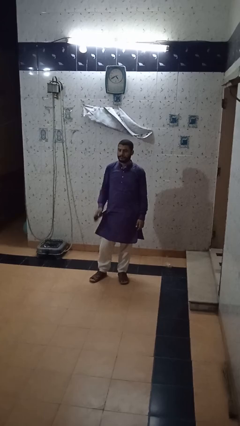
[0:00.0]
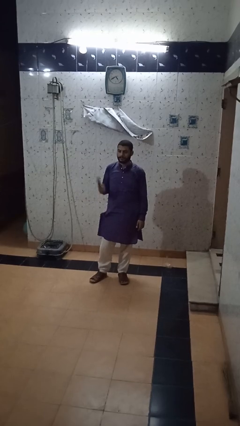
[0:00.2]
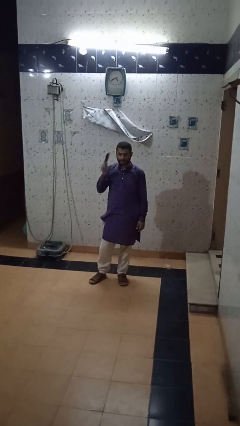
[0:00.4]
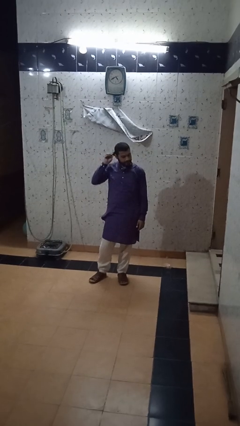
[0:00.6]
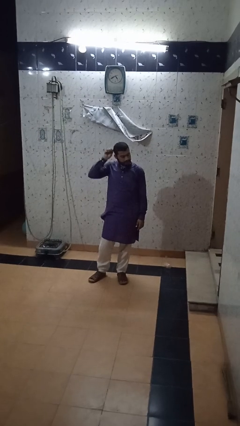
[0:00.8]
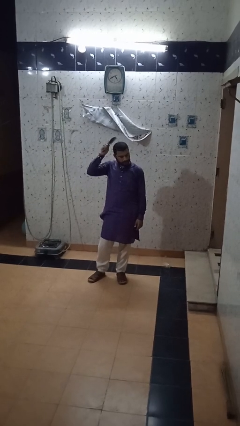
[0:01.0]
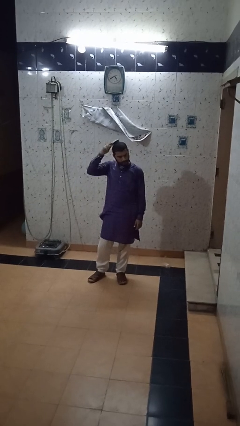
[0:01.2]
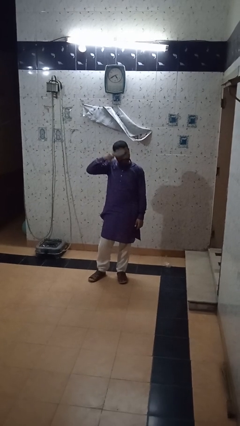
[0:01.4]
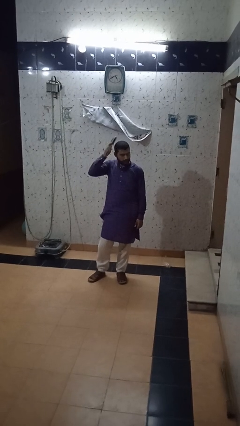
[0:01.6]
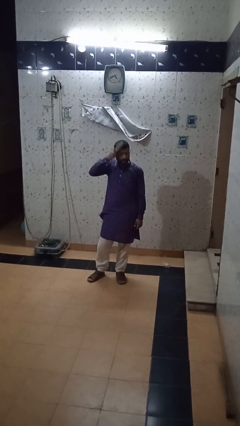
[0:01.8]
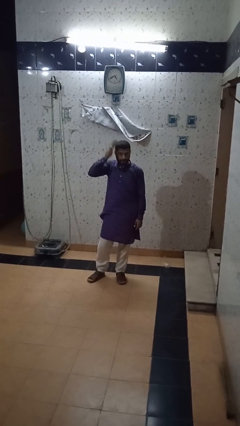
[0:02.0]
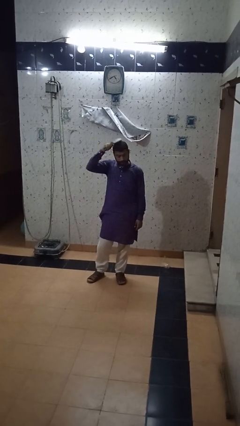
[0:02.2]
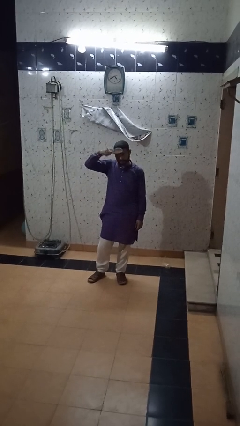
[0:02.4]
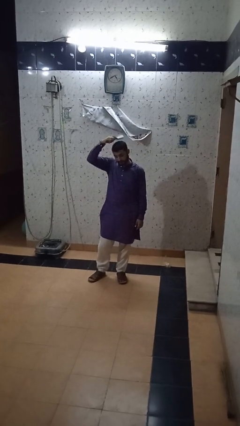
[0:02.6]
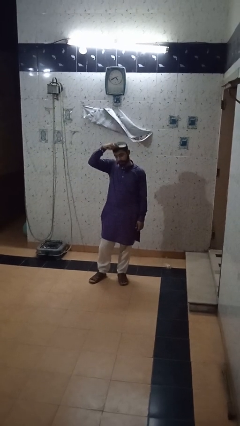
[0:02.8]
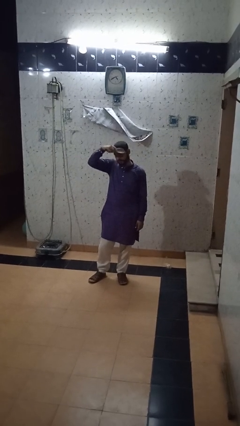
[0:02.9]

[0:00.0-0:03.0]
person brushes hair

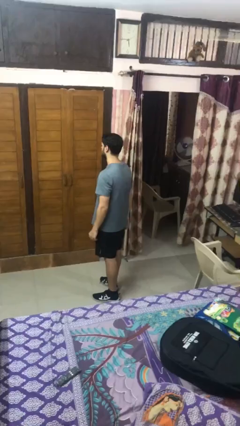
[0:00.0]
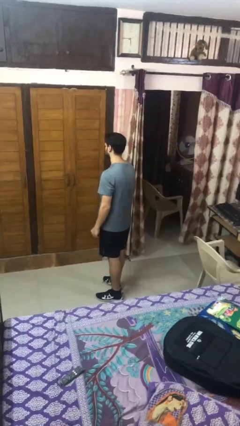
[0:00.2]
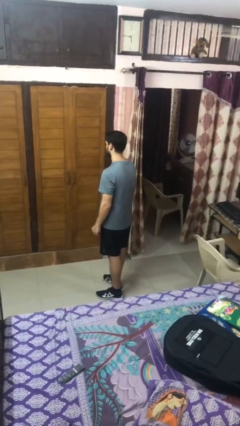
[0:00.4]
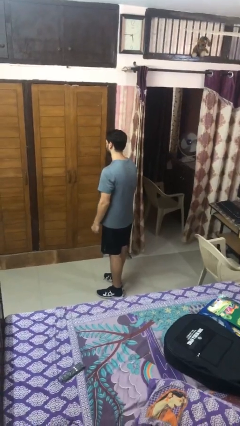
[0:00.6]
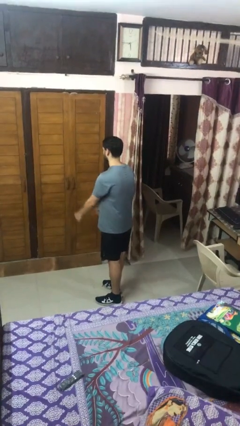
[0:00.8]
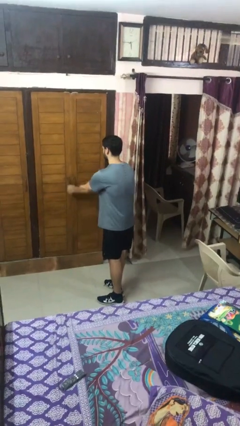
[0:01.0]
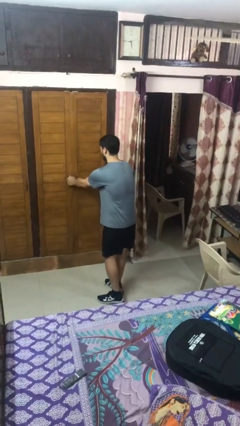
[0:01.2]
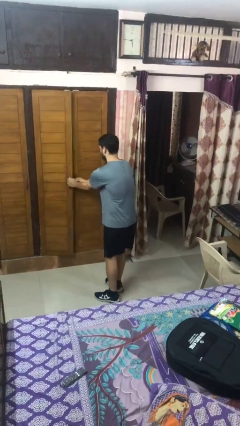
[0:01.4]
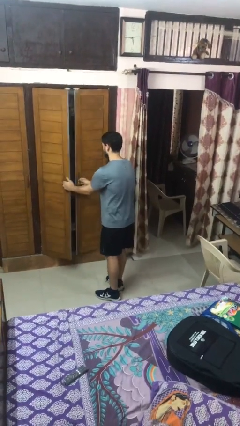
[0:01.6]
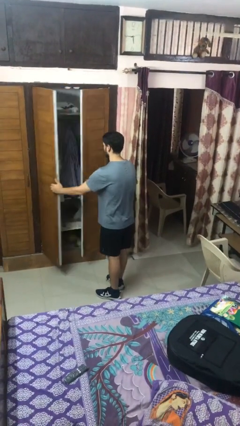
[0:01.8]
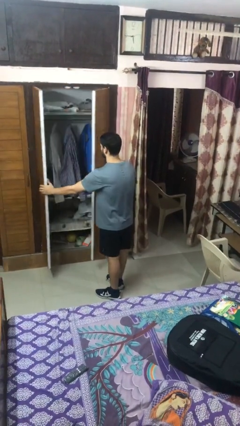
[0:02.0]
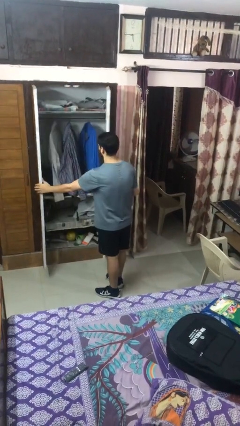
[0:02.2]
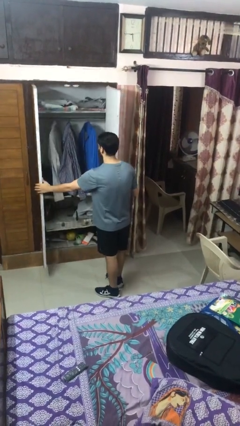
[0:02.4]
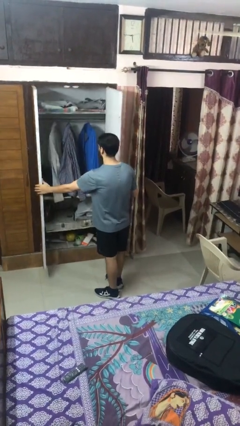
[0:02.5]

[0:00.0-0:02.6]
person opens closet door

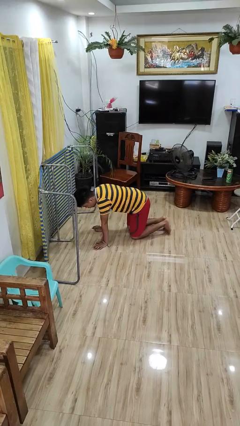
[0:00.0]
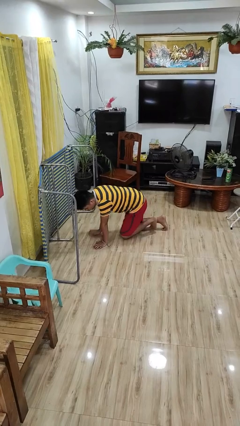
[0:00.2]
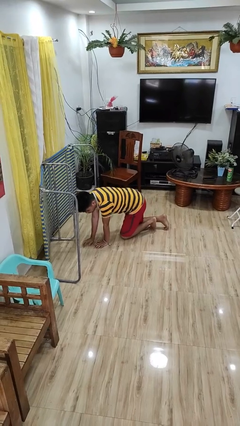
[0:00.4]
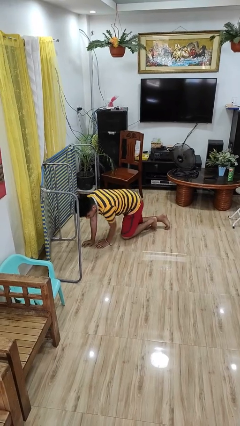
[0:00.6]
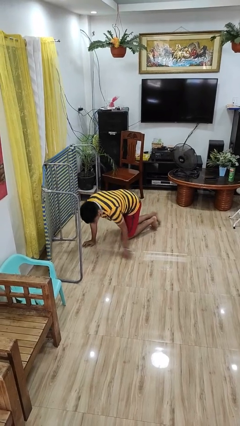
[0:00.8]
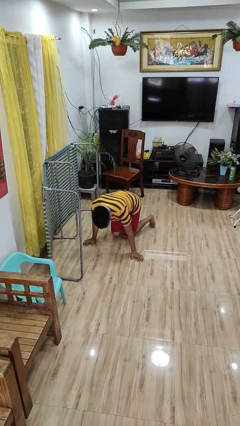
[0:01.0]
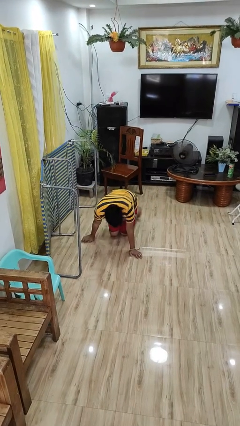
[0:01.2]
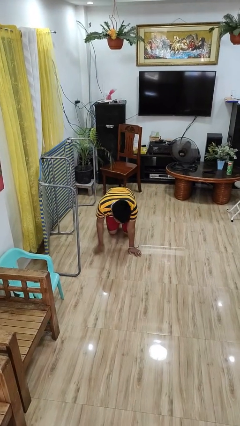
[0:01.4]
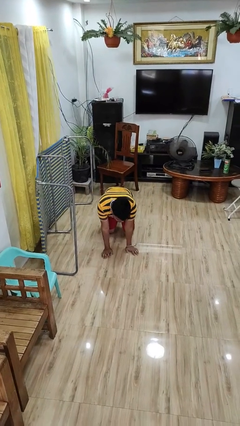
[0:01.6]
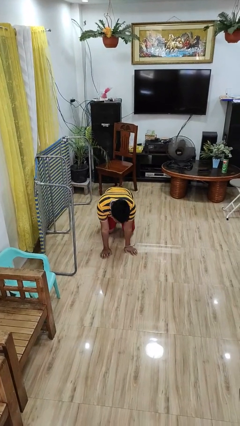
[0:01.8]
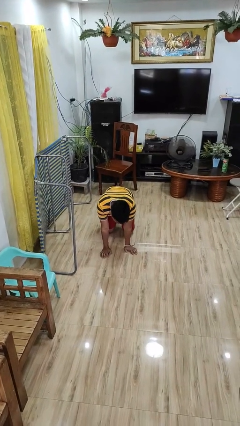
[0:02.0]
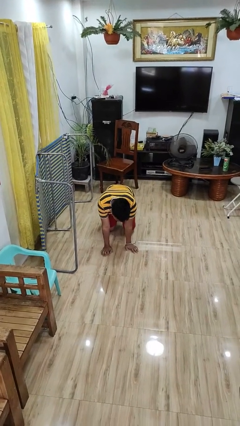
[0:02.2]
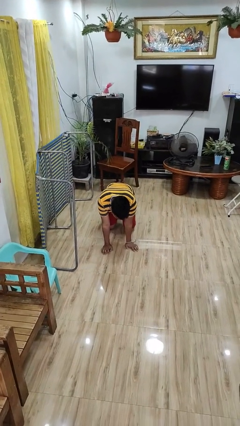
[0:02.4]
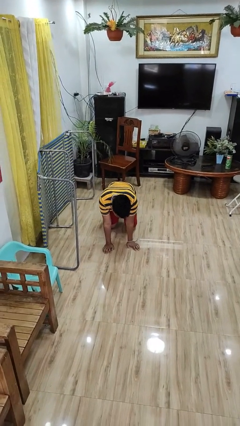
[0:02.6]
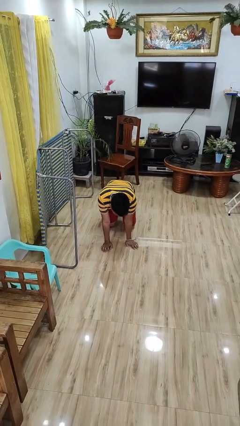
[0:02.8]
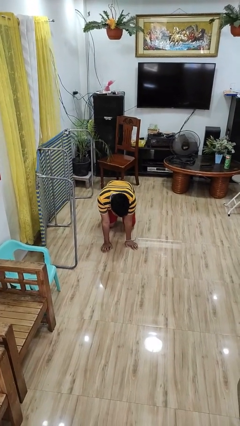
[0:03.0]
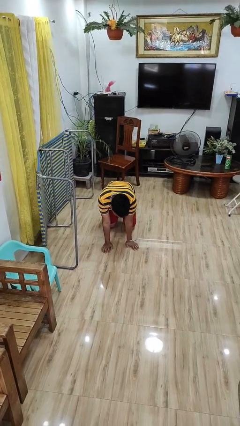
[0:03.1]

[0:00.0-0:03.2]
person crawls

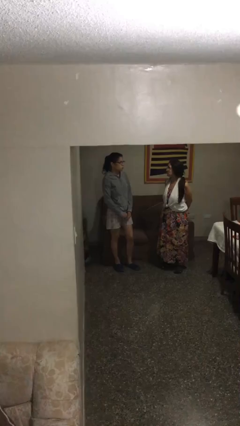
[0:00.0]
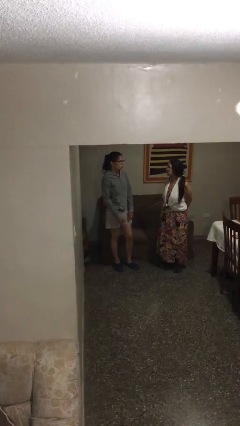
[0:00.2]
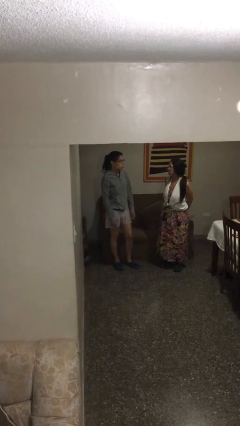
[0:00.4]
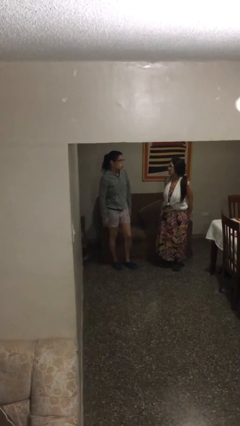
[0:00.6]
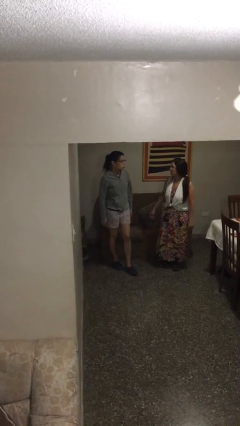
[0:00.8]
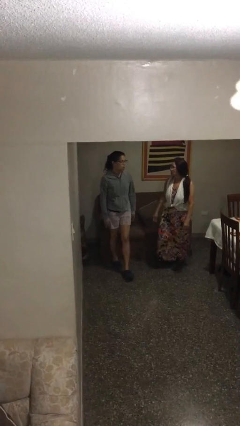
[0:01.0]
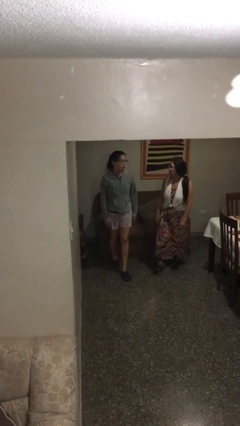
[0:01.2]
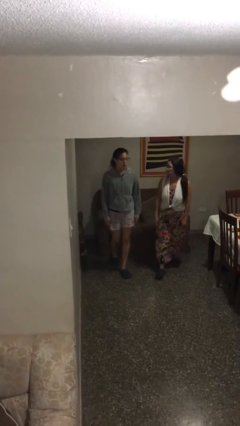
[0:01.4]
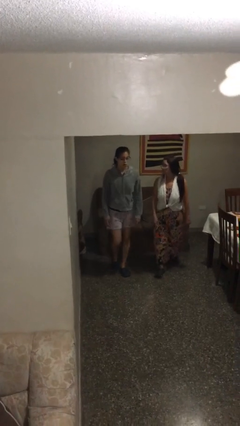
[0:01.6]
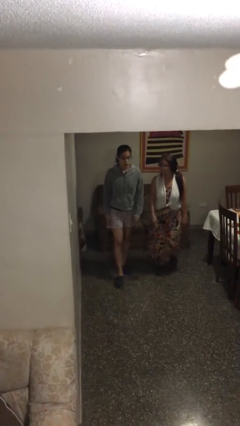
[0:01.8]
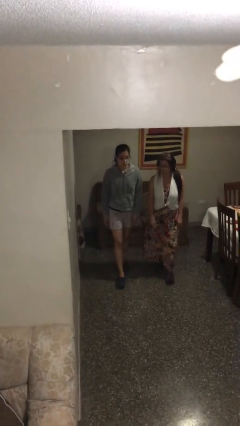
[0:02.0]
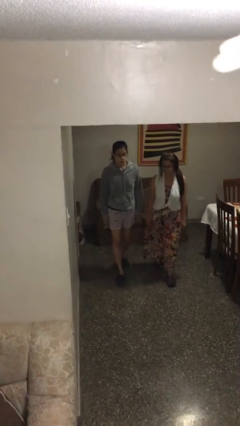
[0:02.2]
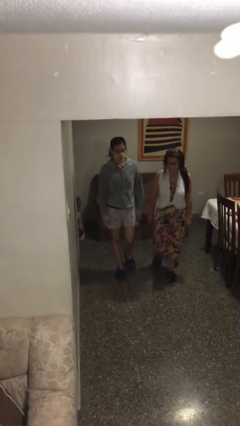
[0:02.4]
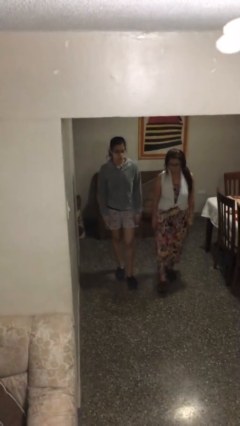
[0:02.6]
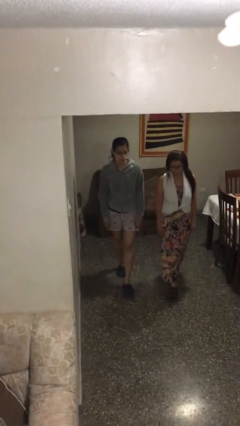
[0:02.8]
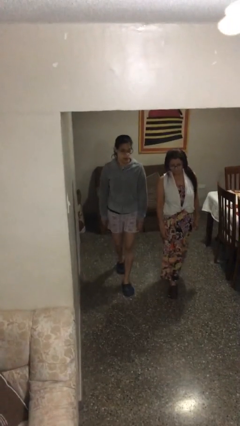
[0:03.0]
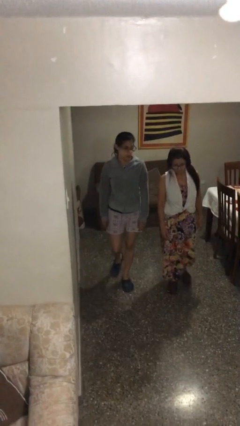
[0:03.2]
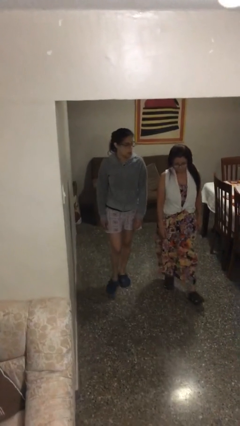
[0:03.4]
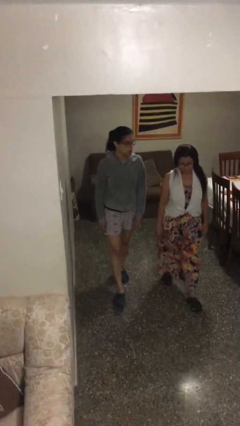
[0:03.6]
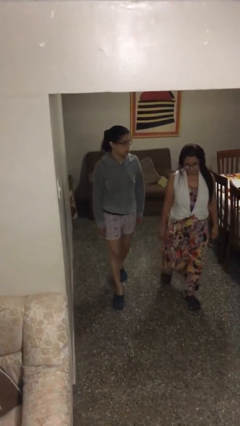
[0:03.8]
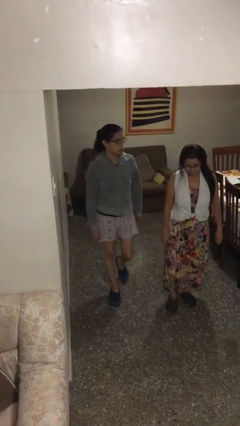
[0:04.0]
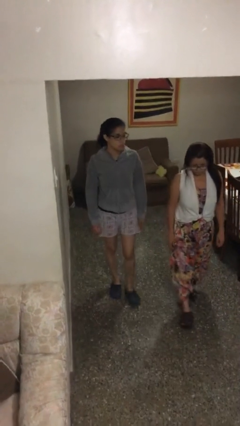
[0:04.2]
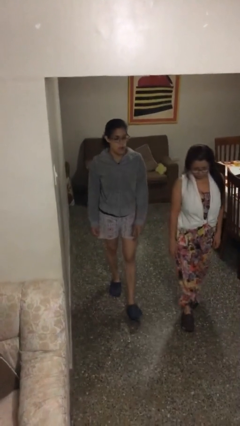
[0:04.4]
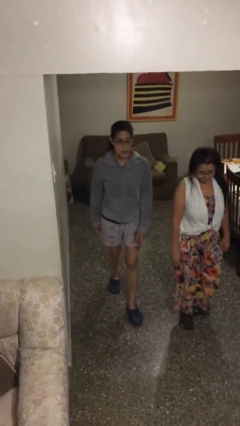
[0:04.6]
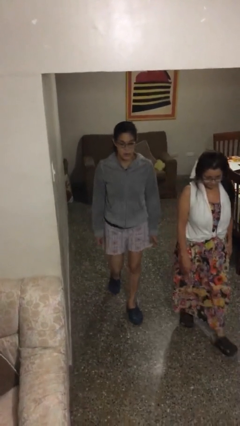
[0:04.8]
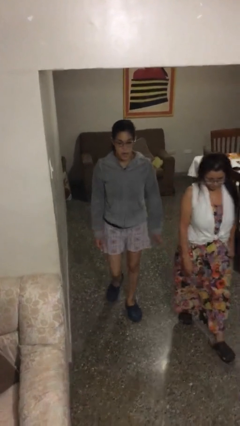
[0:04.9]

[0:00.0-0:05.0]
person talks to person

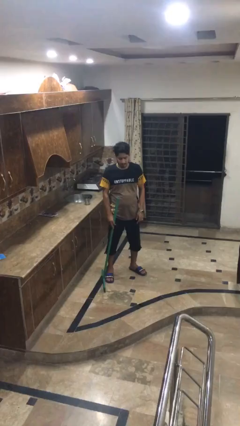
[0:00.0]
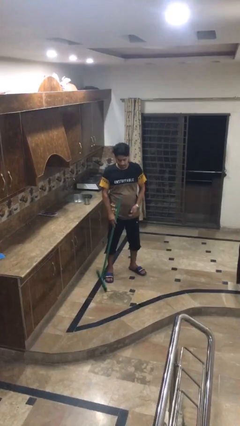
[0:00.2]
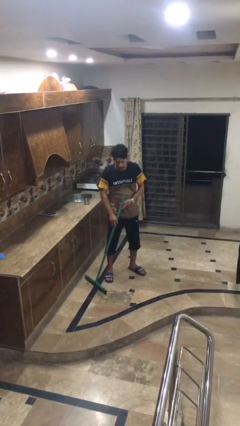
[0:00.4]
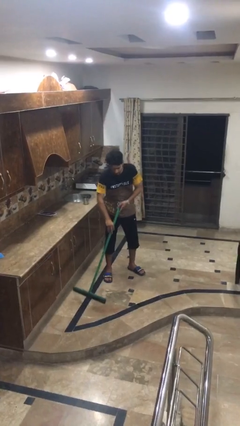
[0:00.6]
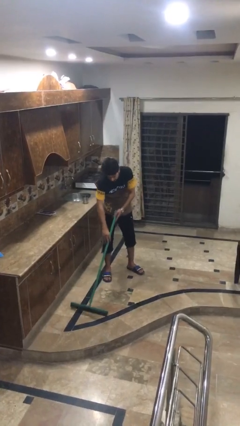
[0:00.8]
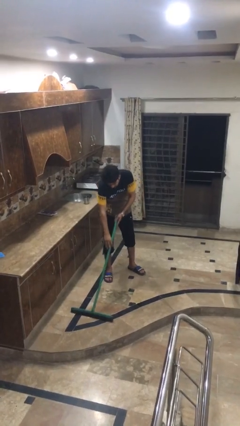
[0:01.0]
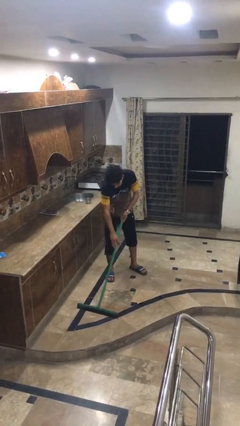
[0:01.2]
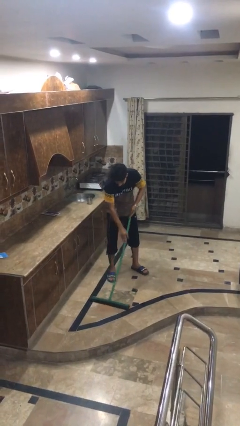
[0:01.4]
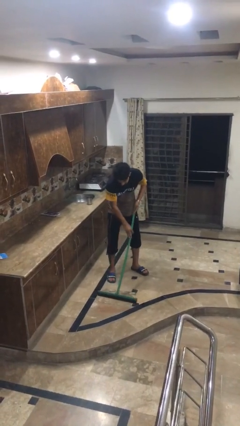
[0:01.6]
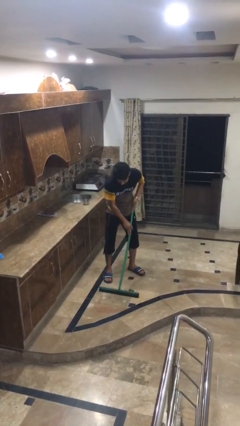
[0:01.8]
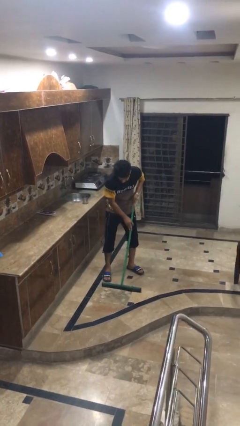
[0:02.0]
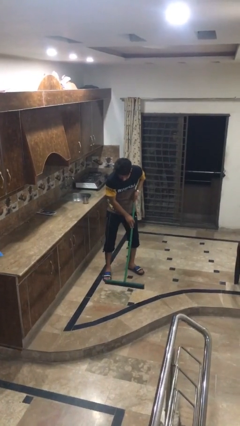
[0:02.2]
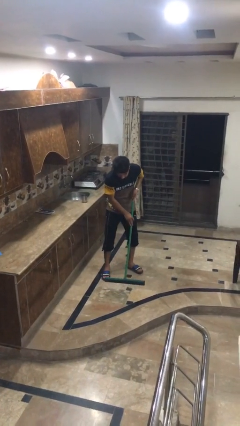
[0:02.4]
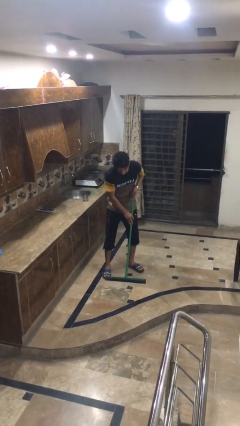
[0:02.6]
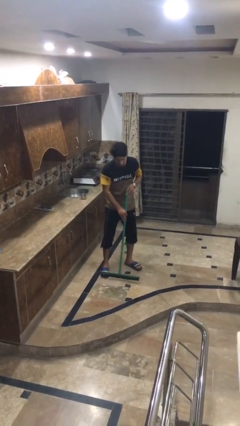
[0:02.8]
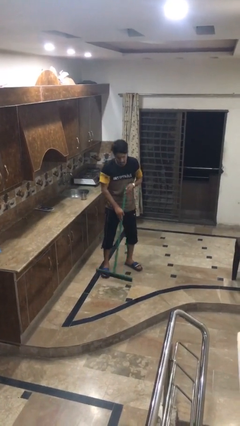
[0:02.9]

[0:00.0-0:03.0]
person mops

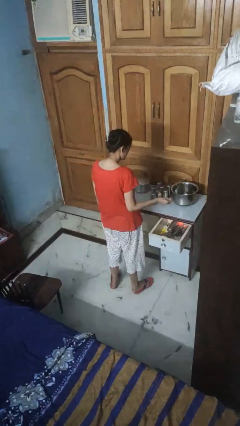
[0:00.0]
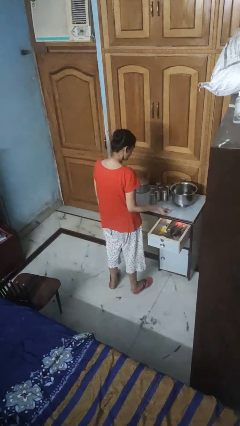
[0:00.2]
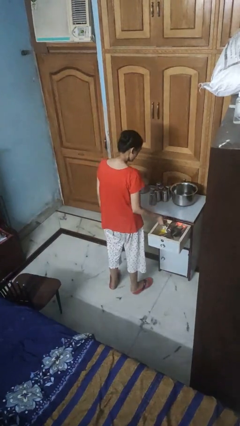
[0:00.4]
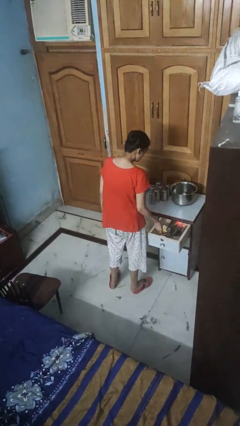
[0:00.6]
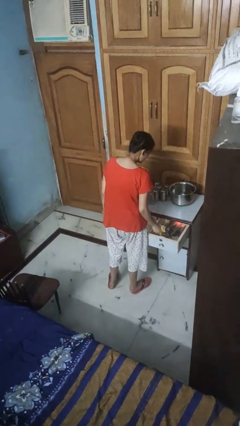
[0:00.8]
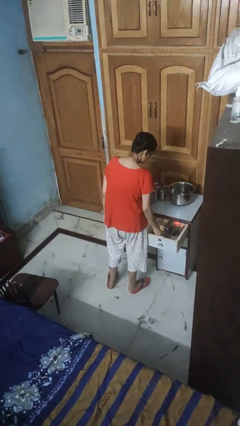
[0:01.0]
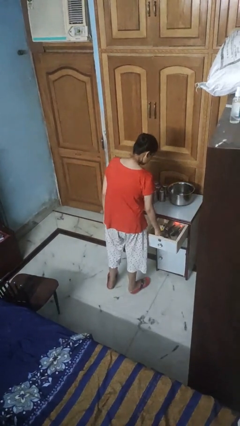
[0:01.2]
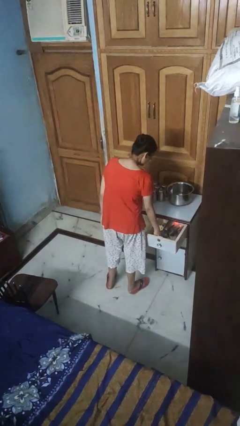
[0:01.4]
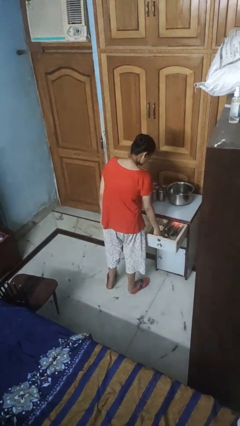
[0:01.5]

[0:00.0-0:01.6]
person puts object into kitchen drawer
